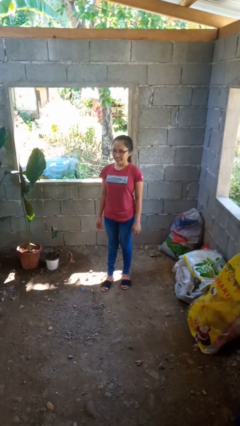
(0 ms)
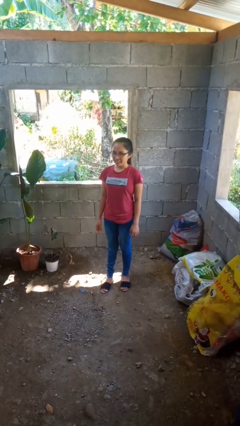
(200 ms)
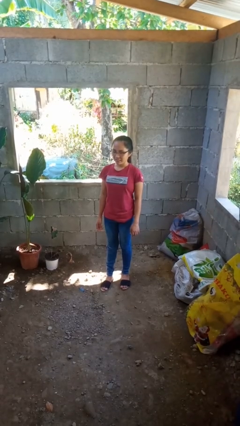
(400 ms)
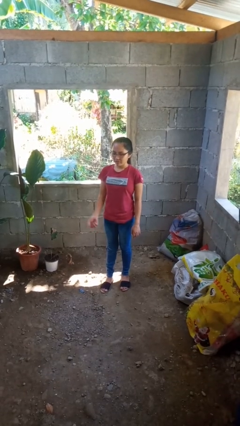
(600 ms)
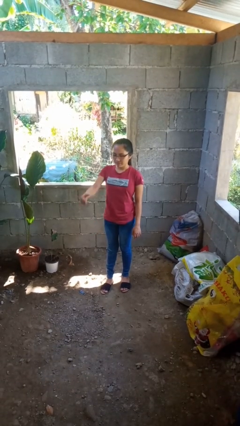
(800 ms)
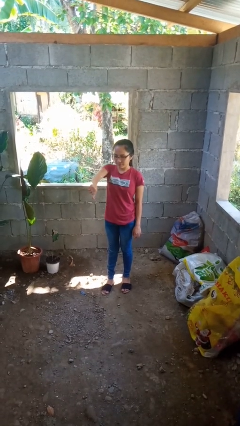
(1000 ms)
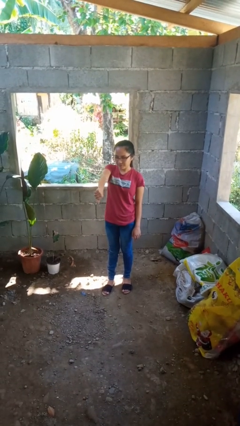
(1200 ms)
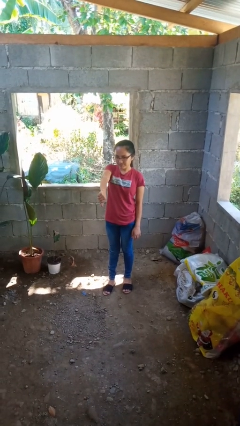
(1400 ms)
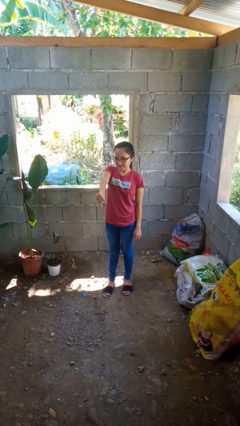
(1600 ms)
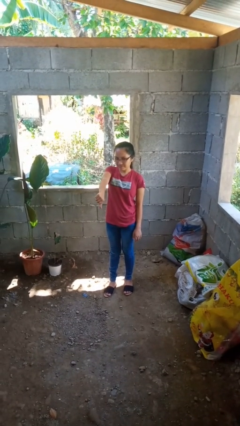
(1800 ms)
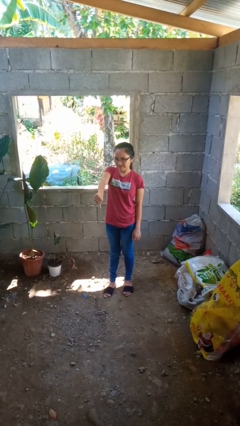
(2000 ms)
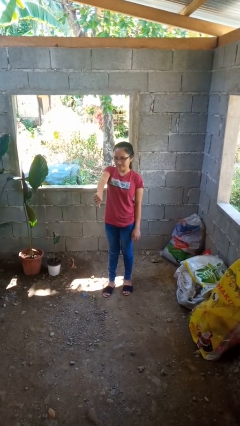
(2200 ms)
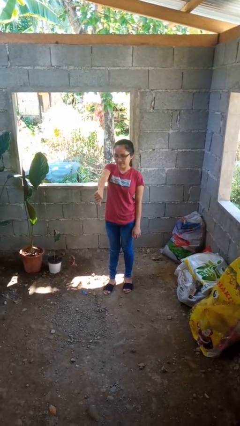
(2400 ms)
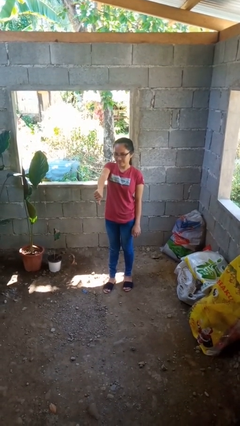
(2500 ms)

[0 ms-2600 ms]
person gestures thumbs down

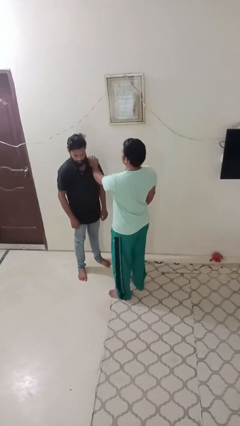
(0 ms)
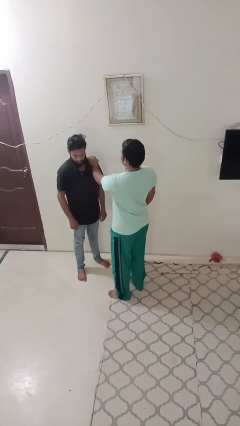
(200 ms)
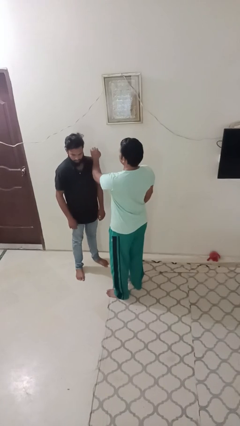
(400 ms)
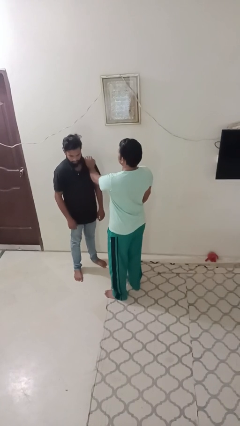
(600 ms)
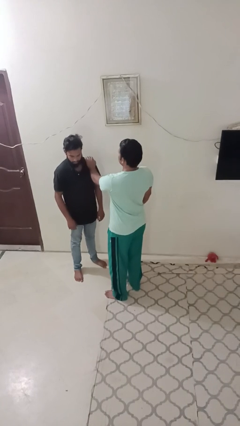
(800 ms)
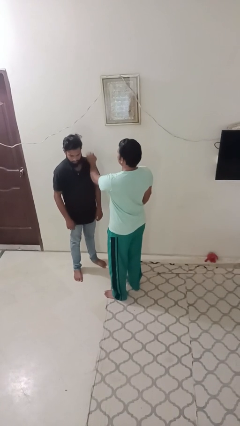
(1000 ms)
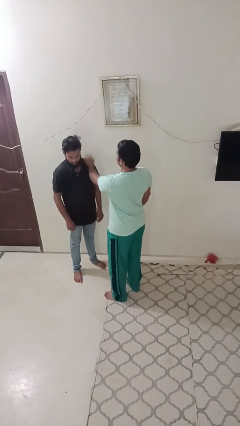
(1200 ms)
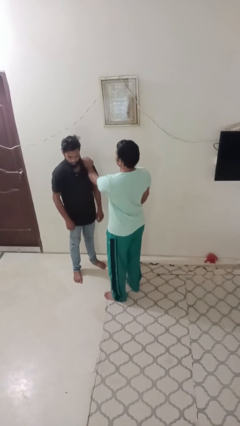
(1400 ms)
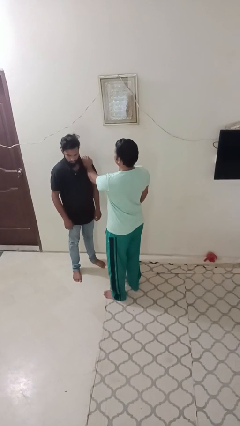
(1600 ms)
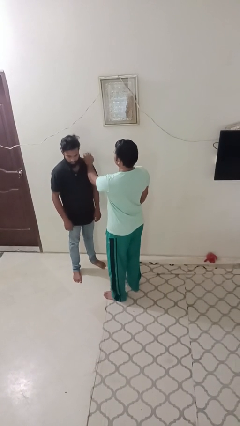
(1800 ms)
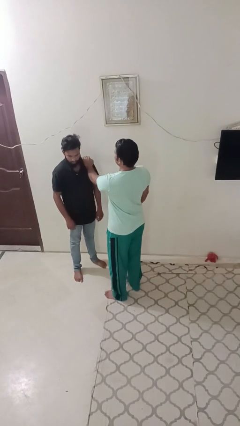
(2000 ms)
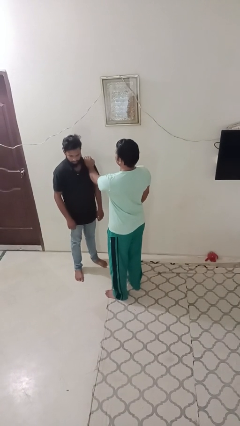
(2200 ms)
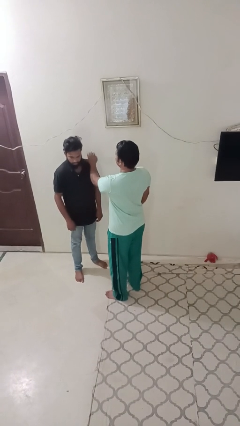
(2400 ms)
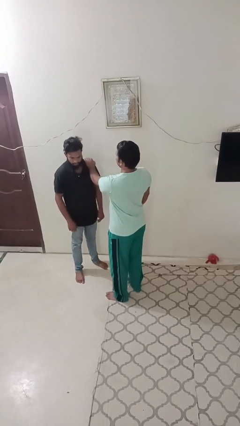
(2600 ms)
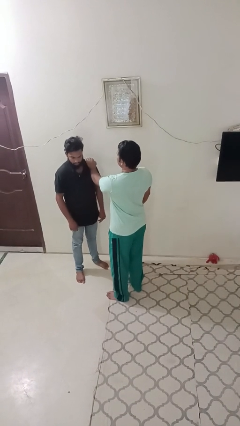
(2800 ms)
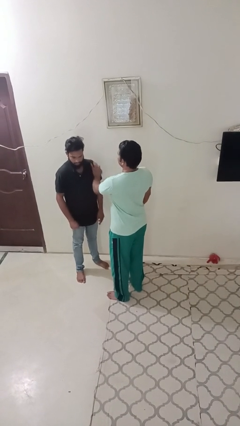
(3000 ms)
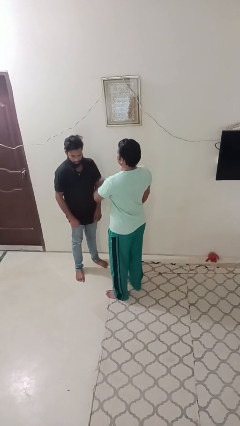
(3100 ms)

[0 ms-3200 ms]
person pounds shoulders of person

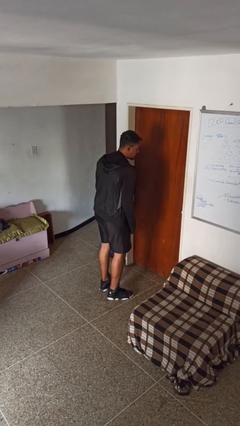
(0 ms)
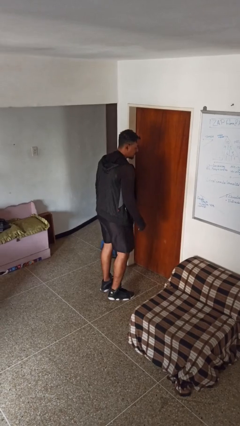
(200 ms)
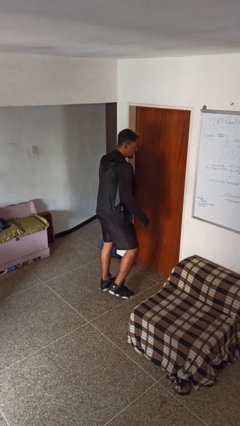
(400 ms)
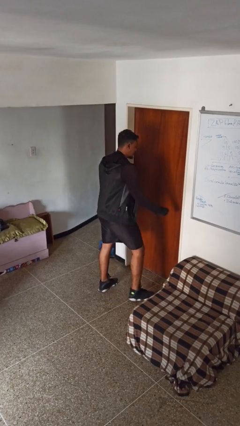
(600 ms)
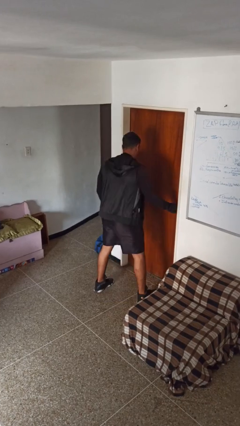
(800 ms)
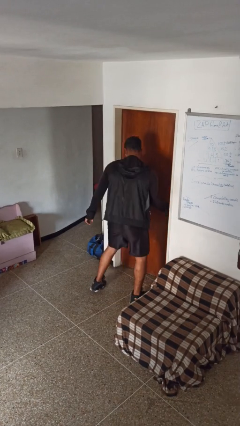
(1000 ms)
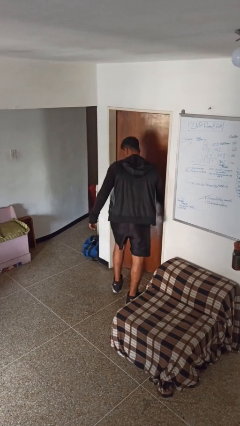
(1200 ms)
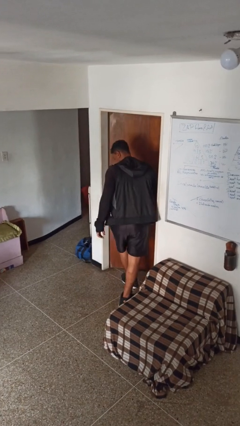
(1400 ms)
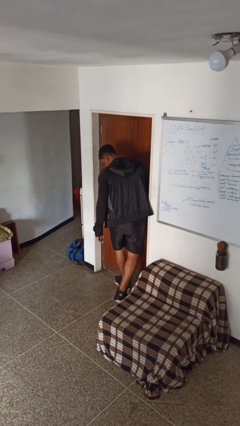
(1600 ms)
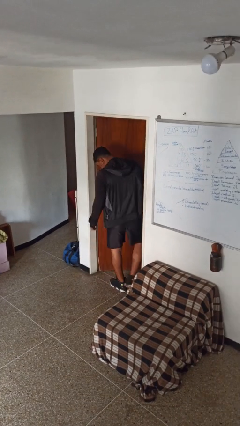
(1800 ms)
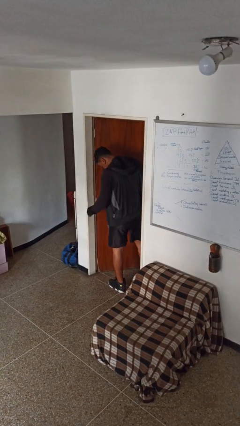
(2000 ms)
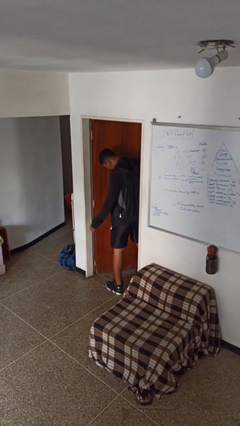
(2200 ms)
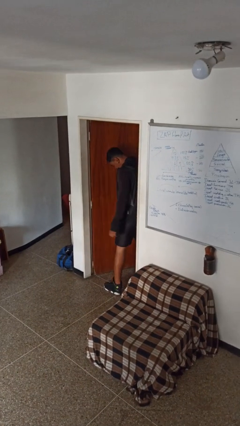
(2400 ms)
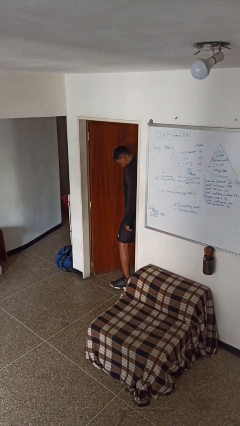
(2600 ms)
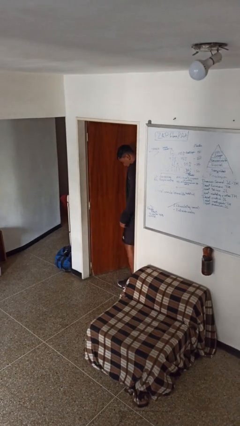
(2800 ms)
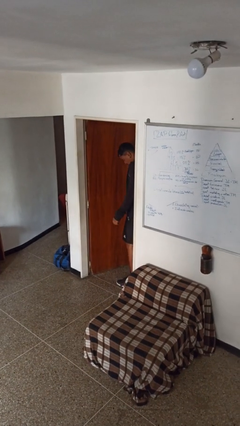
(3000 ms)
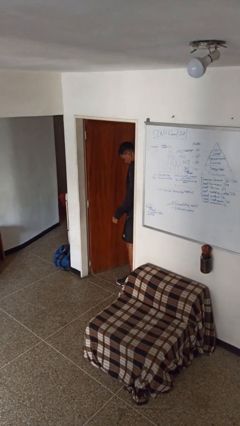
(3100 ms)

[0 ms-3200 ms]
person opens facility door

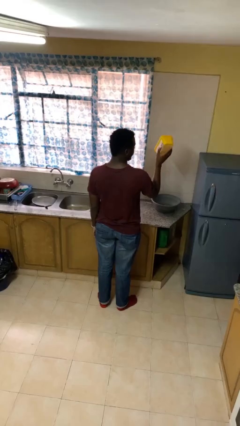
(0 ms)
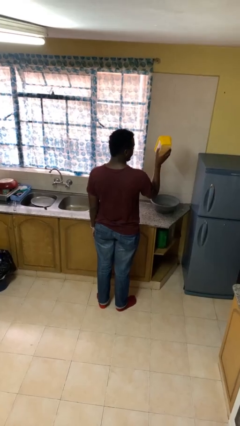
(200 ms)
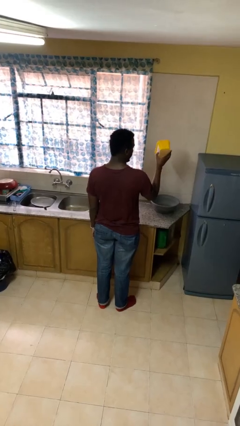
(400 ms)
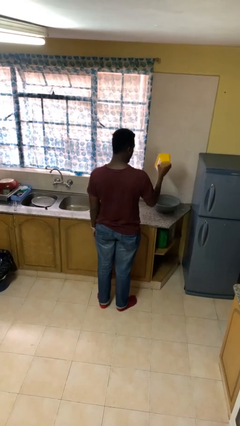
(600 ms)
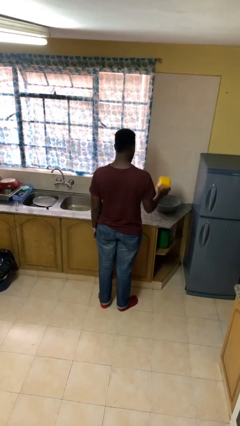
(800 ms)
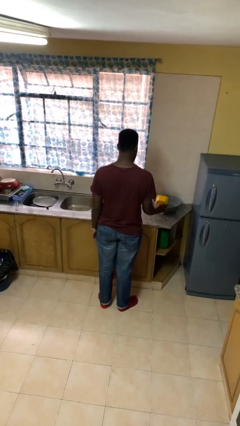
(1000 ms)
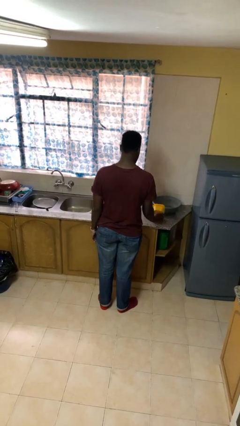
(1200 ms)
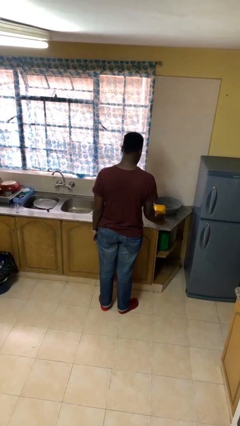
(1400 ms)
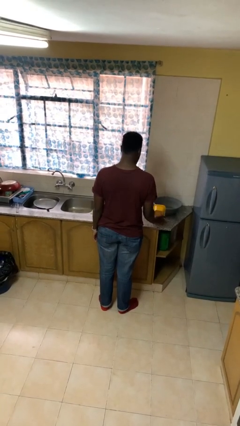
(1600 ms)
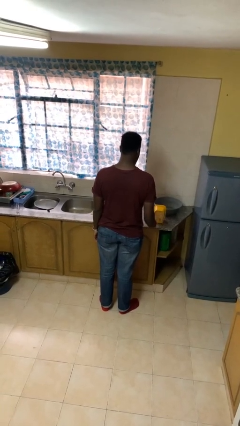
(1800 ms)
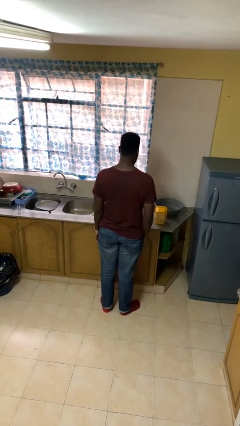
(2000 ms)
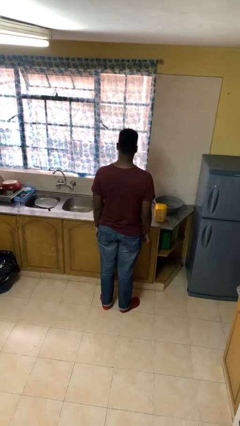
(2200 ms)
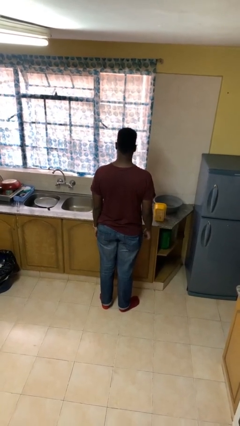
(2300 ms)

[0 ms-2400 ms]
person puts down object on countertop

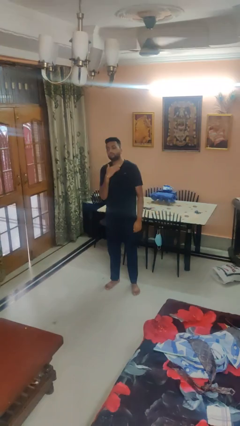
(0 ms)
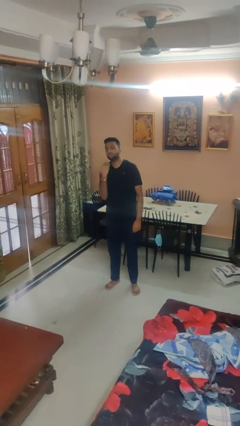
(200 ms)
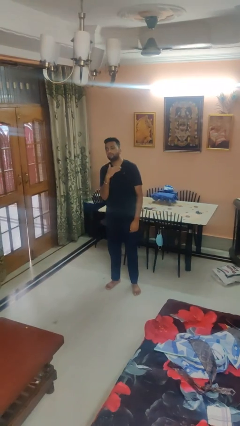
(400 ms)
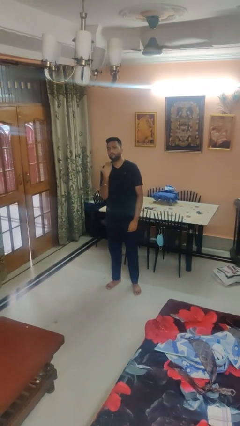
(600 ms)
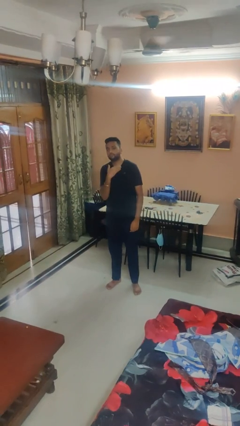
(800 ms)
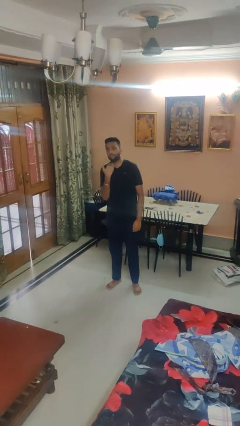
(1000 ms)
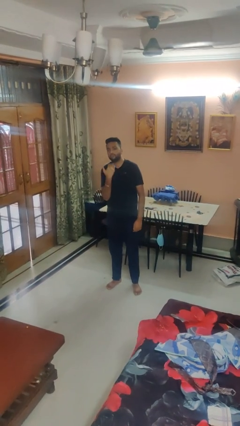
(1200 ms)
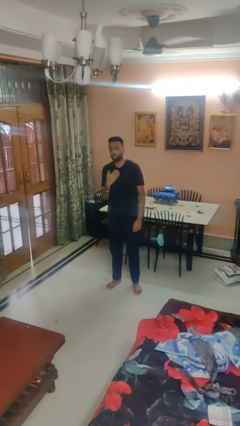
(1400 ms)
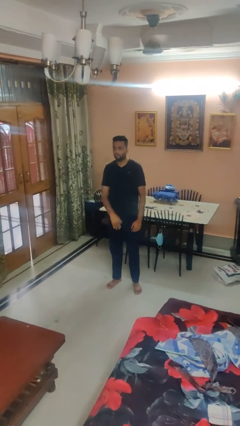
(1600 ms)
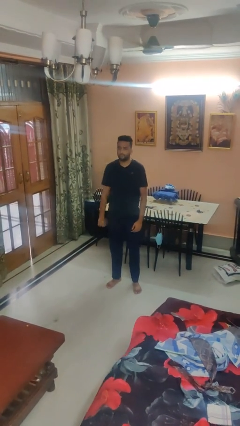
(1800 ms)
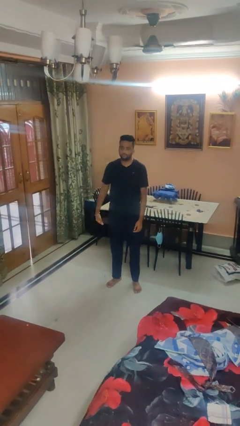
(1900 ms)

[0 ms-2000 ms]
person gestures cut

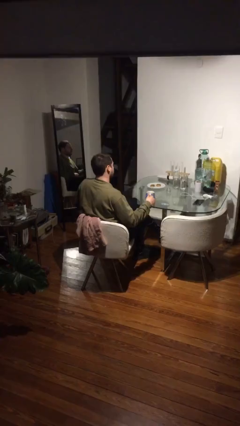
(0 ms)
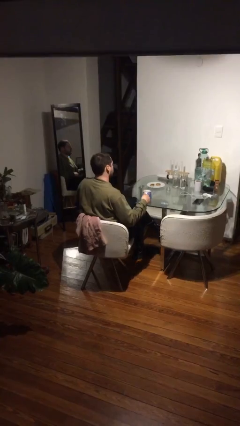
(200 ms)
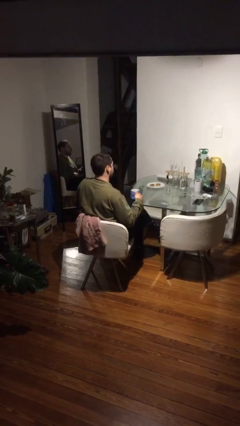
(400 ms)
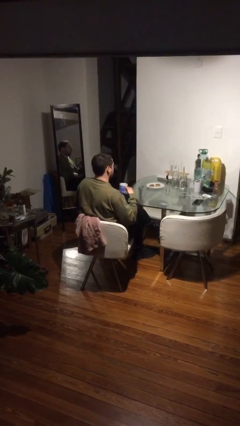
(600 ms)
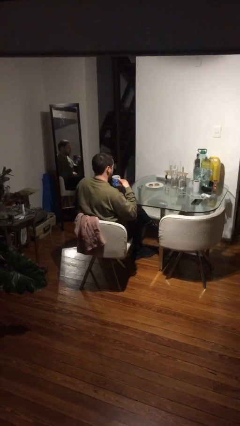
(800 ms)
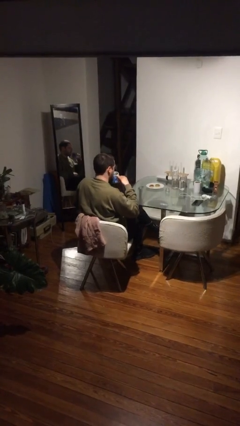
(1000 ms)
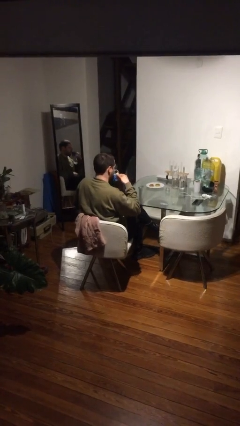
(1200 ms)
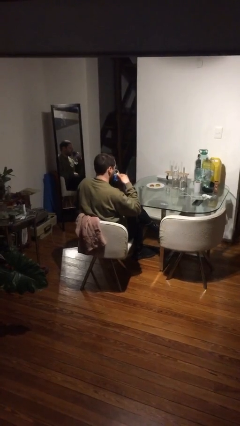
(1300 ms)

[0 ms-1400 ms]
person picks up object from table

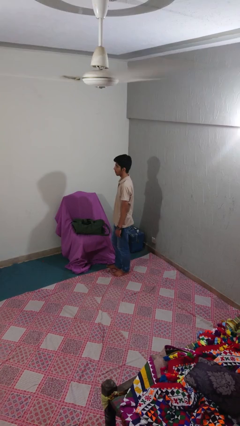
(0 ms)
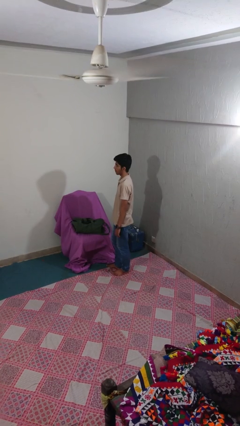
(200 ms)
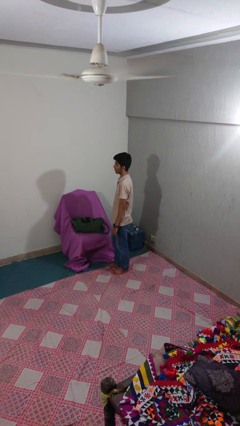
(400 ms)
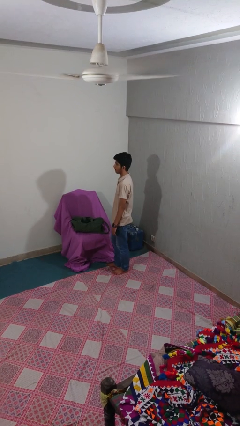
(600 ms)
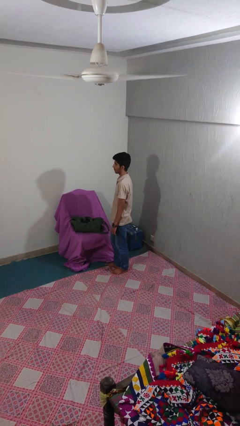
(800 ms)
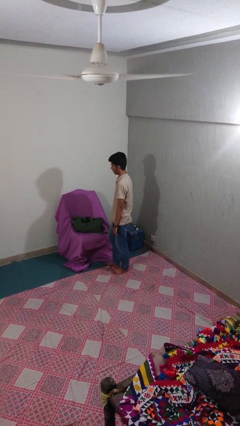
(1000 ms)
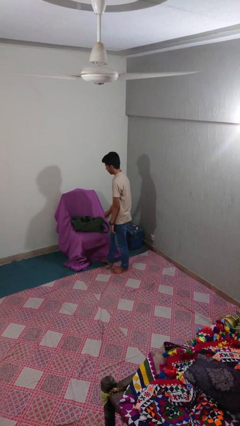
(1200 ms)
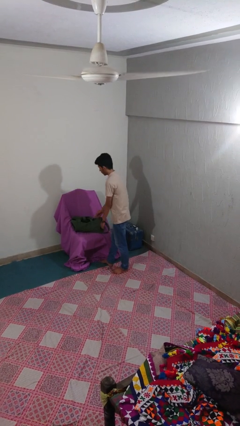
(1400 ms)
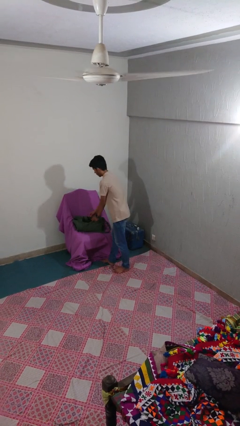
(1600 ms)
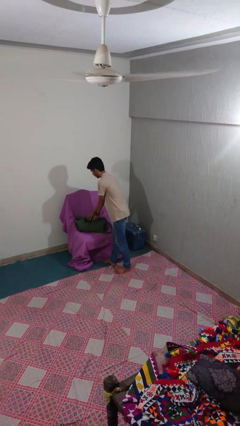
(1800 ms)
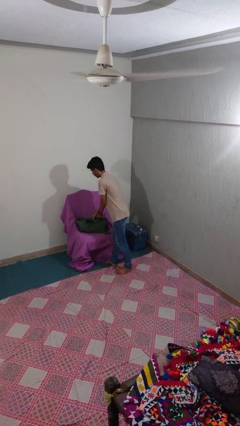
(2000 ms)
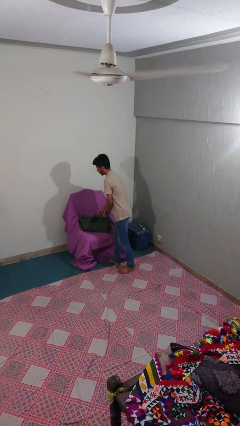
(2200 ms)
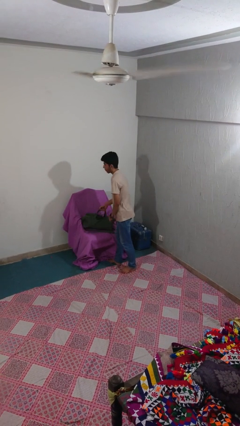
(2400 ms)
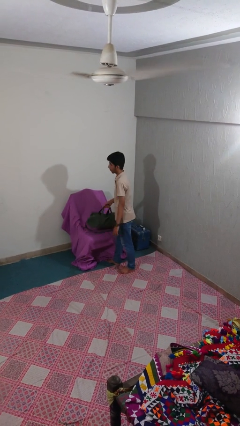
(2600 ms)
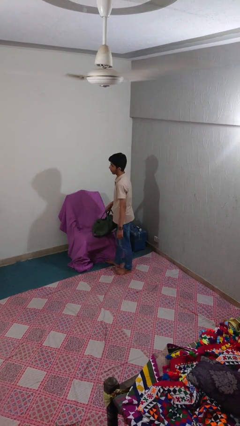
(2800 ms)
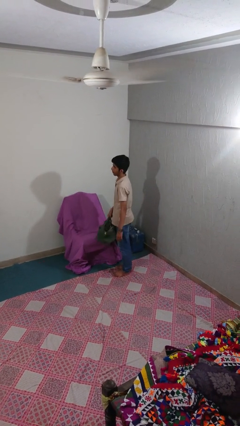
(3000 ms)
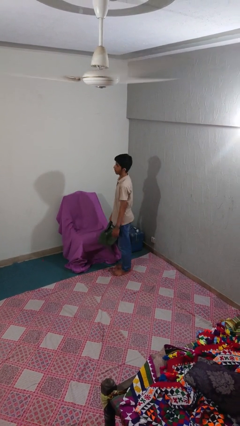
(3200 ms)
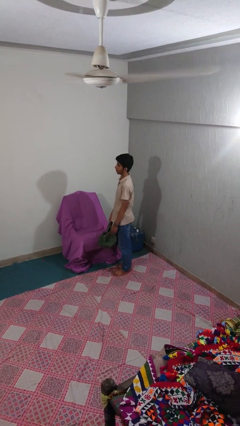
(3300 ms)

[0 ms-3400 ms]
person picks up object from couch
